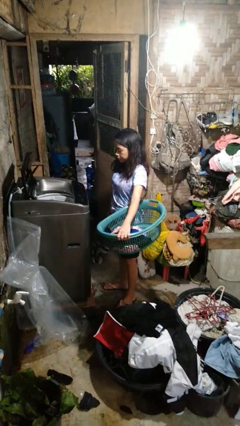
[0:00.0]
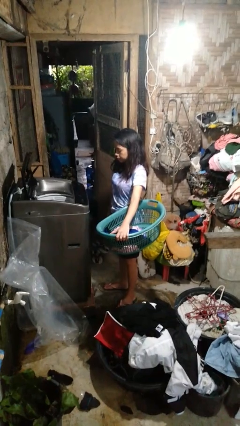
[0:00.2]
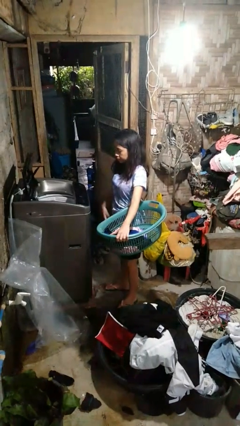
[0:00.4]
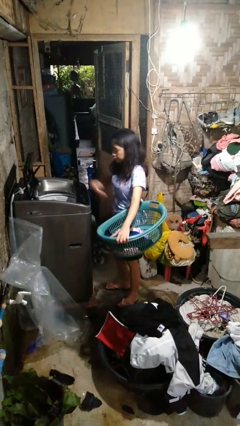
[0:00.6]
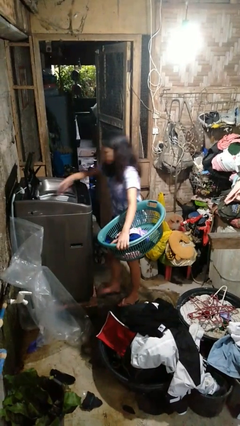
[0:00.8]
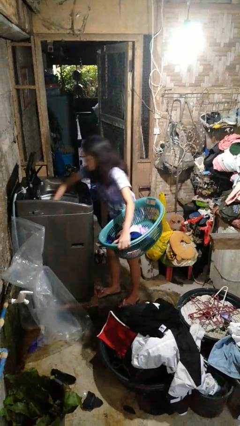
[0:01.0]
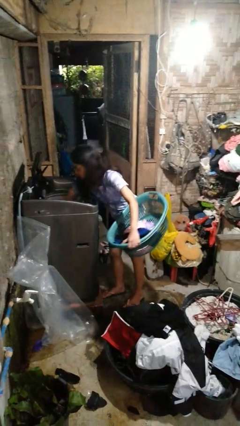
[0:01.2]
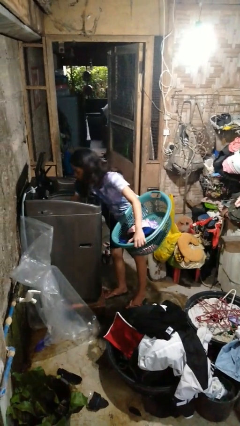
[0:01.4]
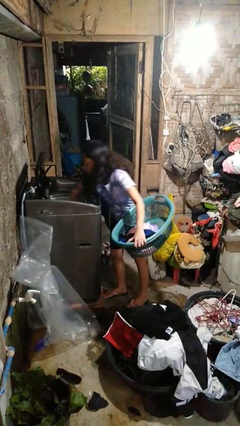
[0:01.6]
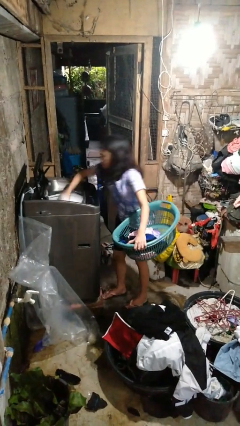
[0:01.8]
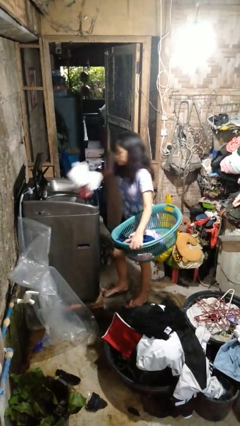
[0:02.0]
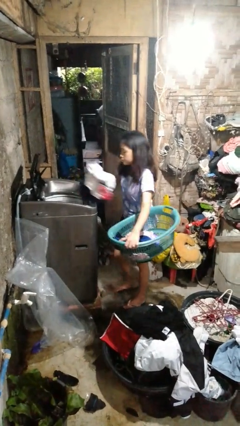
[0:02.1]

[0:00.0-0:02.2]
person unloads dryer

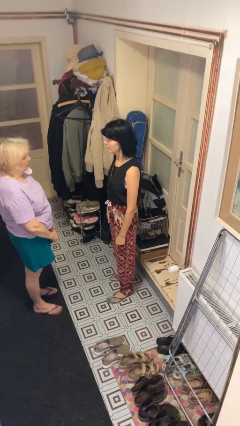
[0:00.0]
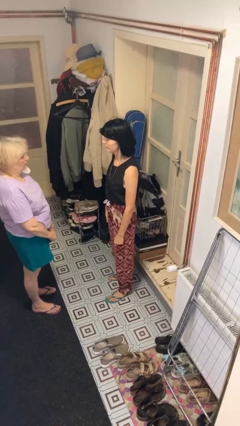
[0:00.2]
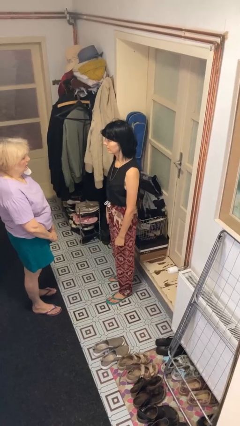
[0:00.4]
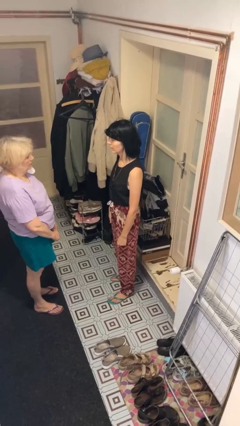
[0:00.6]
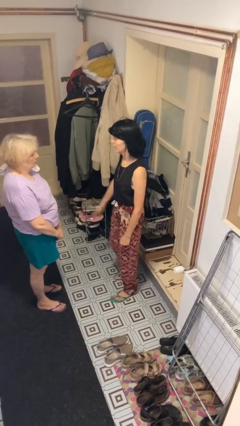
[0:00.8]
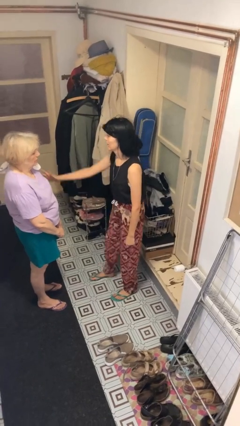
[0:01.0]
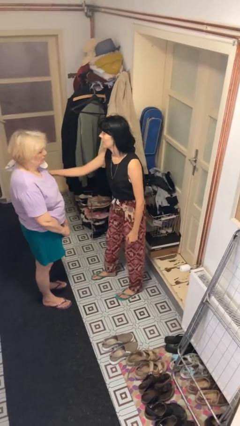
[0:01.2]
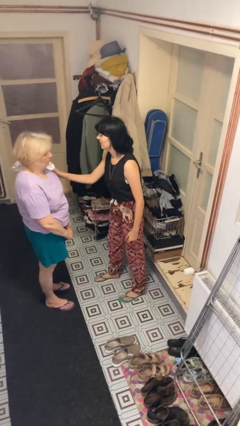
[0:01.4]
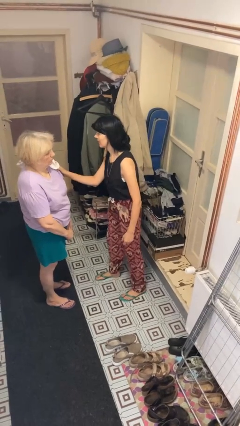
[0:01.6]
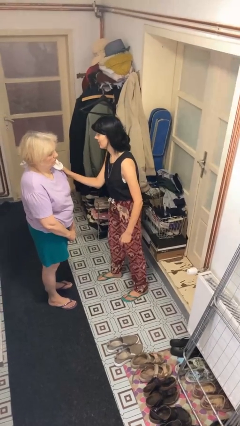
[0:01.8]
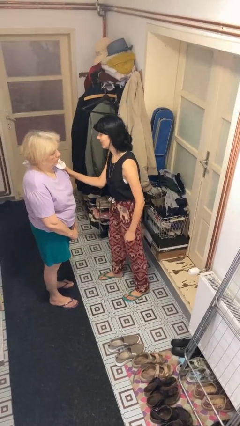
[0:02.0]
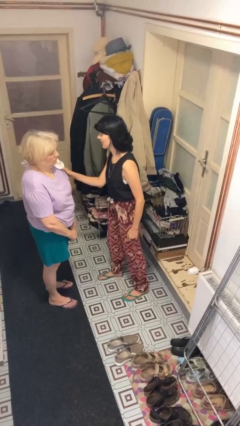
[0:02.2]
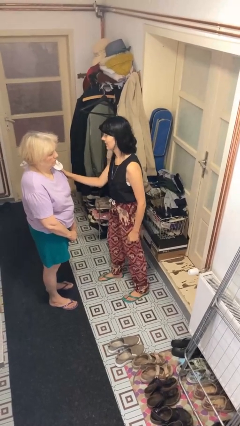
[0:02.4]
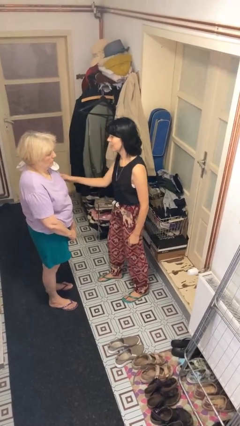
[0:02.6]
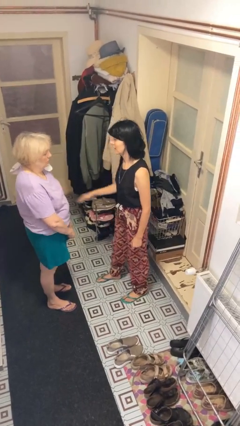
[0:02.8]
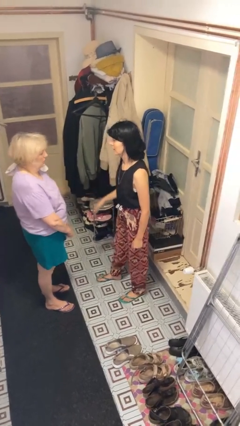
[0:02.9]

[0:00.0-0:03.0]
person grabs person by bicep

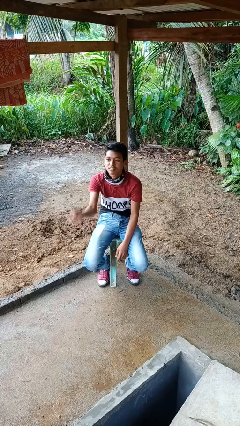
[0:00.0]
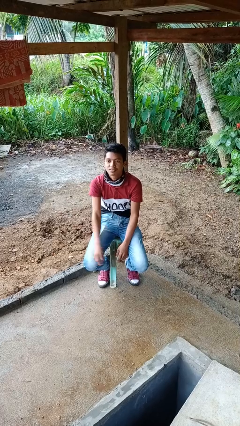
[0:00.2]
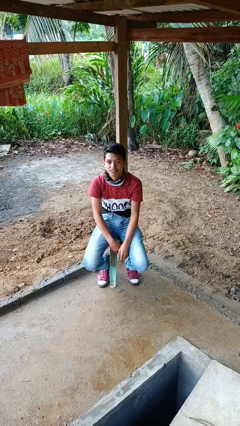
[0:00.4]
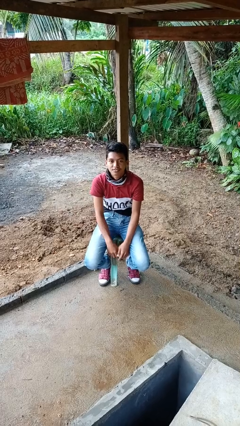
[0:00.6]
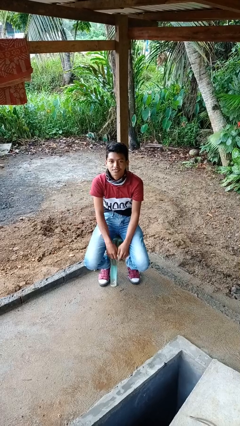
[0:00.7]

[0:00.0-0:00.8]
person gestures blow kiss

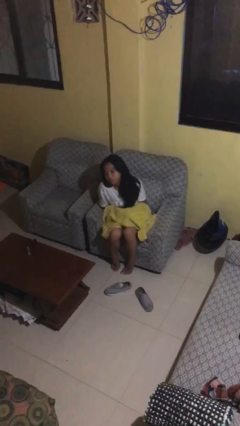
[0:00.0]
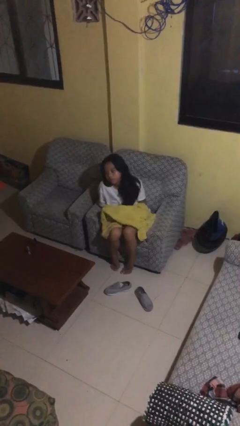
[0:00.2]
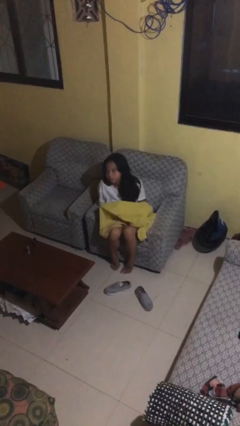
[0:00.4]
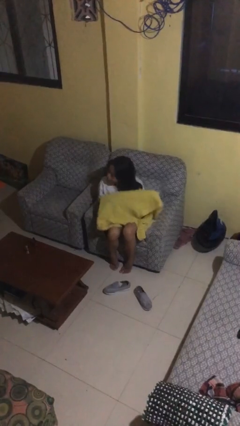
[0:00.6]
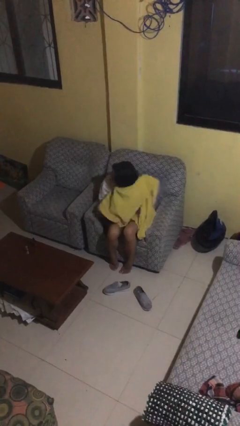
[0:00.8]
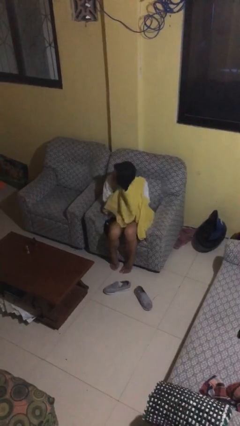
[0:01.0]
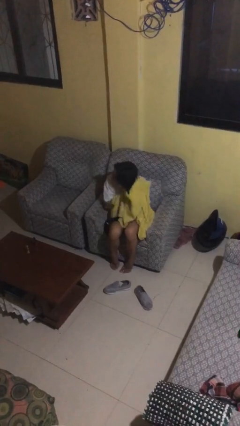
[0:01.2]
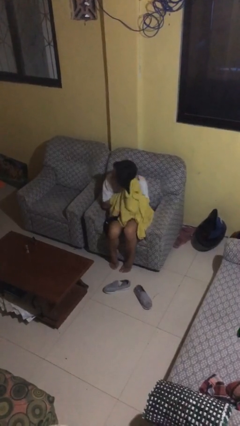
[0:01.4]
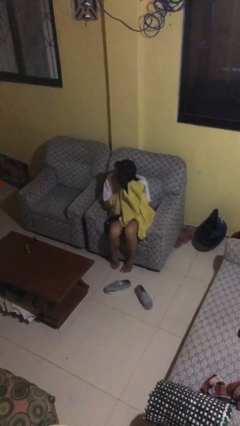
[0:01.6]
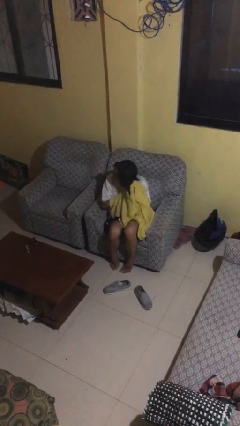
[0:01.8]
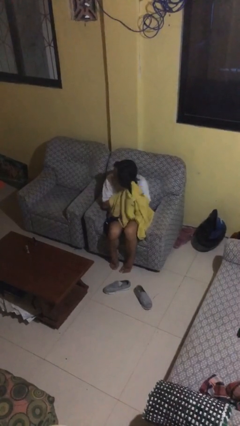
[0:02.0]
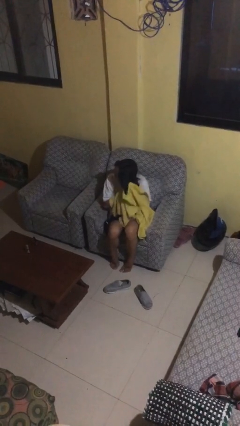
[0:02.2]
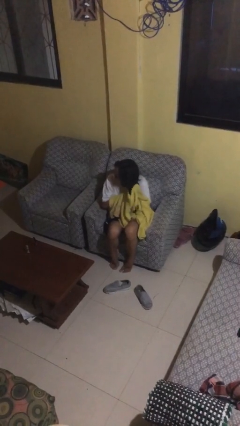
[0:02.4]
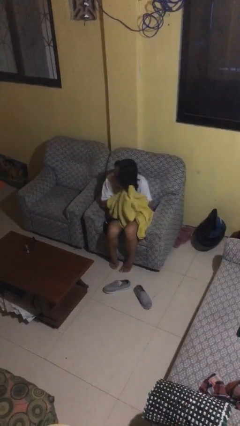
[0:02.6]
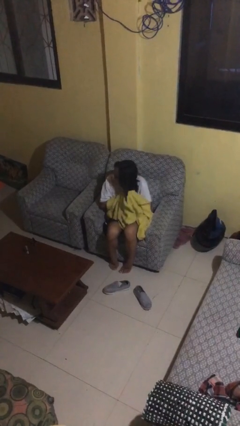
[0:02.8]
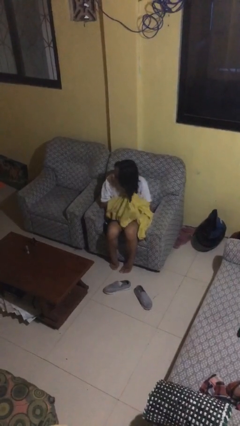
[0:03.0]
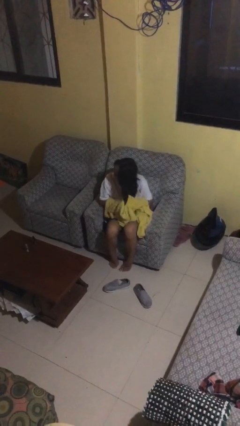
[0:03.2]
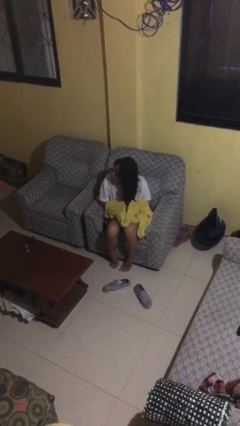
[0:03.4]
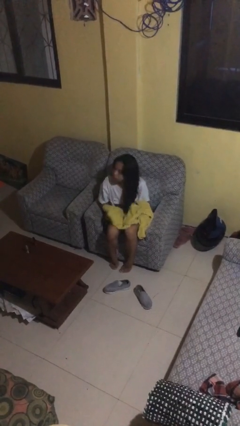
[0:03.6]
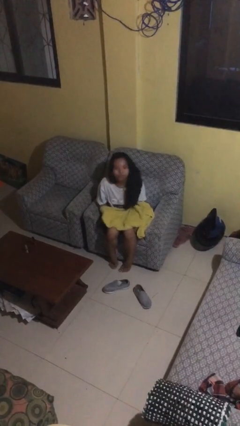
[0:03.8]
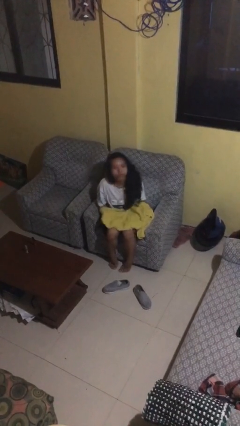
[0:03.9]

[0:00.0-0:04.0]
person dries hair with towel

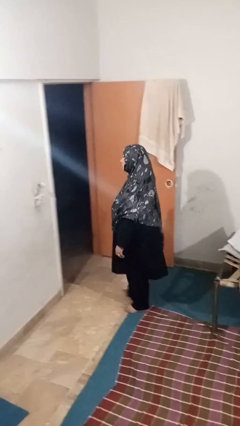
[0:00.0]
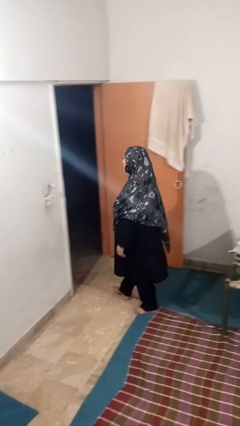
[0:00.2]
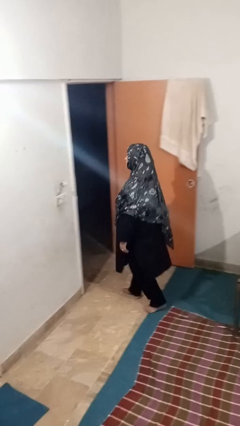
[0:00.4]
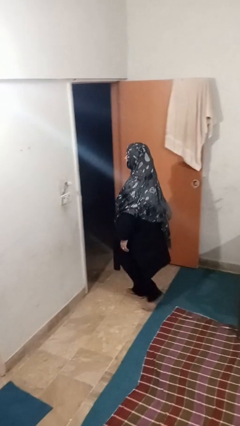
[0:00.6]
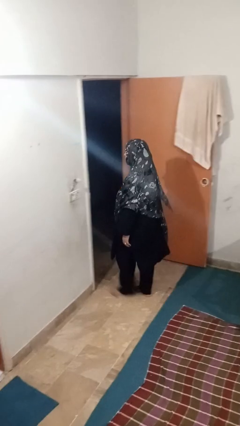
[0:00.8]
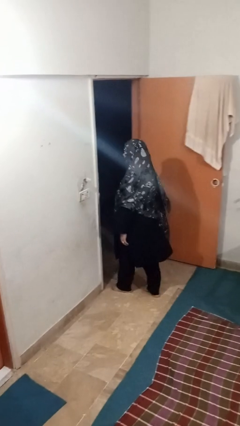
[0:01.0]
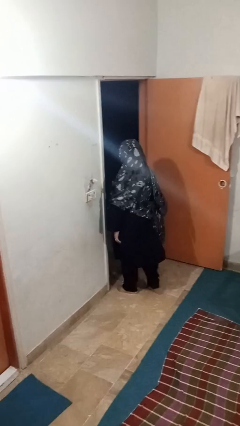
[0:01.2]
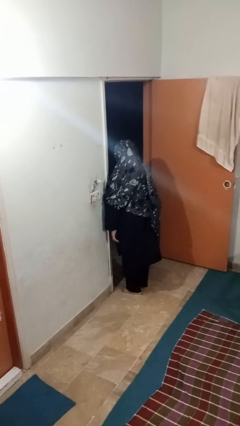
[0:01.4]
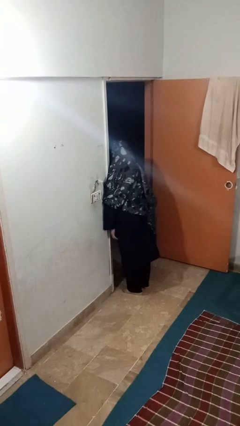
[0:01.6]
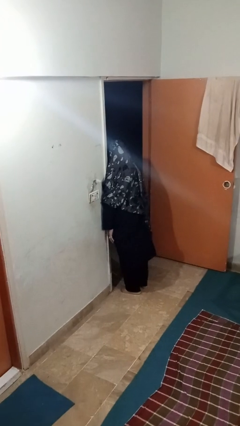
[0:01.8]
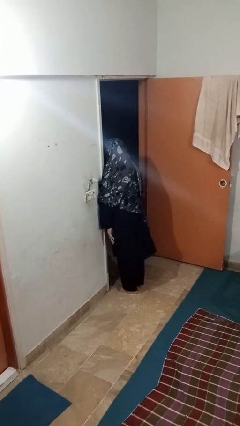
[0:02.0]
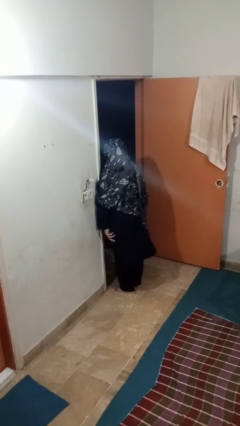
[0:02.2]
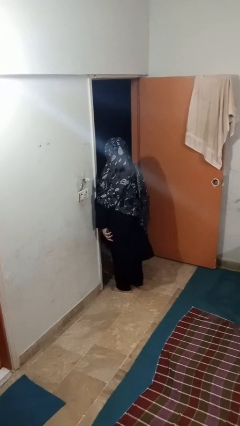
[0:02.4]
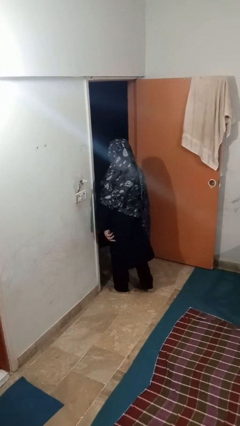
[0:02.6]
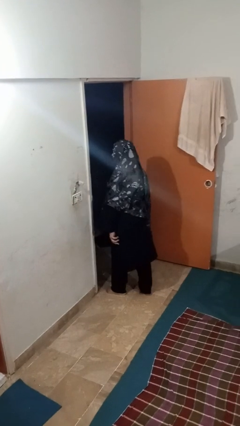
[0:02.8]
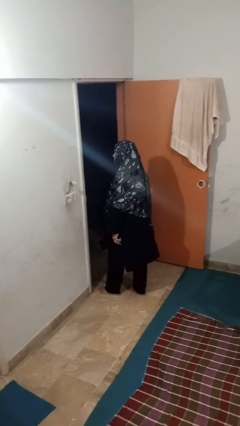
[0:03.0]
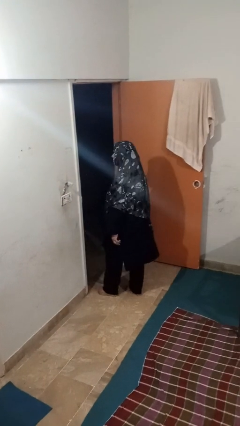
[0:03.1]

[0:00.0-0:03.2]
person bumps into wall

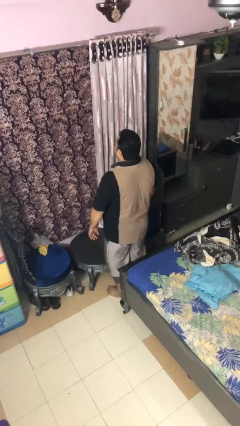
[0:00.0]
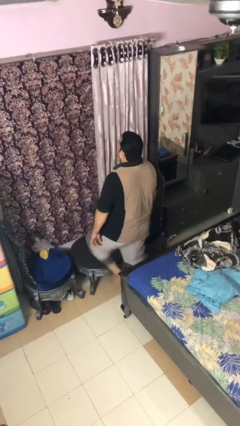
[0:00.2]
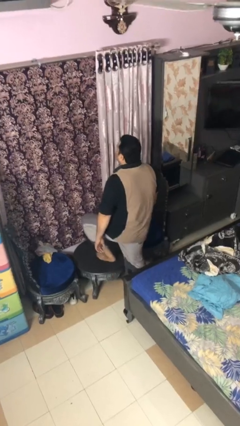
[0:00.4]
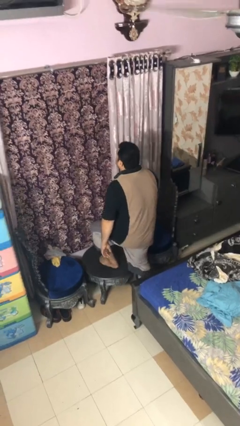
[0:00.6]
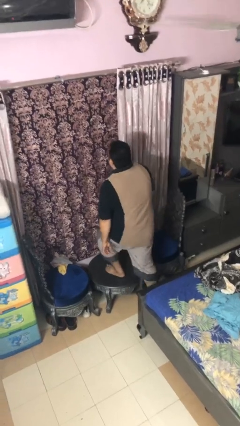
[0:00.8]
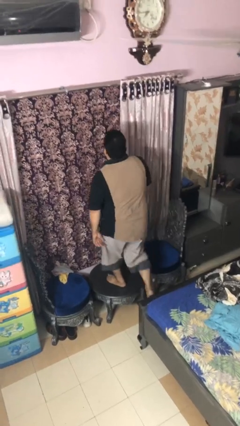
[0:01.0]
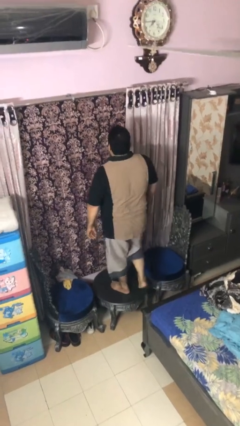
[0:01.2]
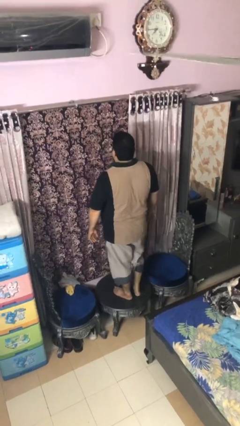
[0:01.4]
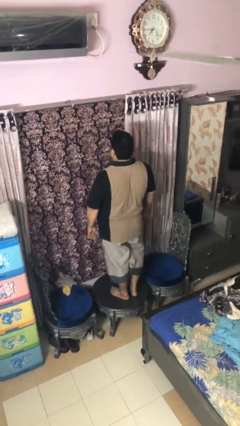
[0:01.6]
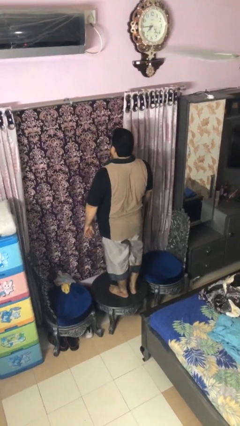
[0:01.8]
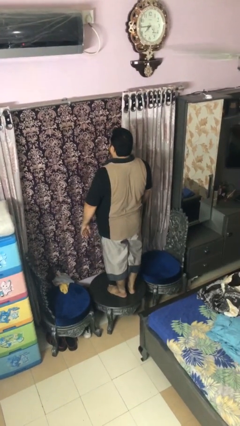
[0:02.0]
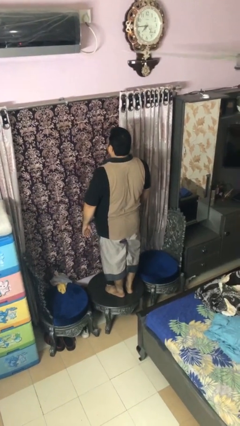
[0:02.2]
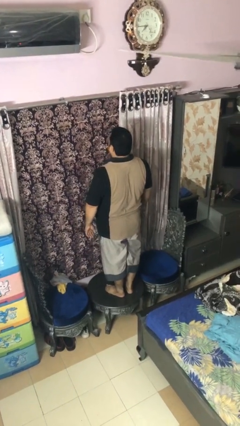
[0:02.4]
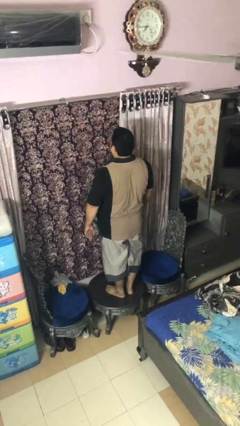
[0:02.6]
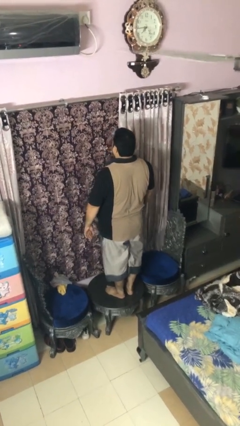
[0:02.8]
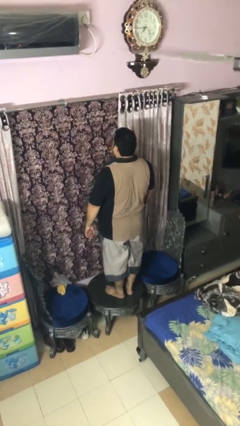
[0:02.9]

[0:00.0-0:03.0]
person climbs on table

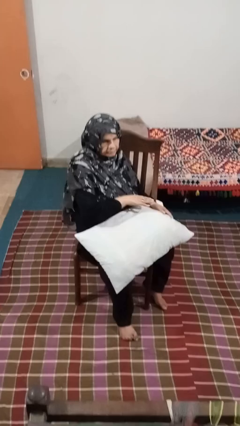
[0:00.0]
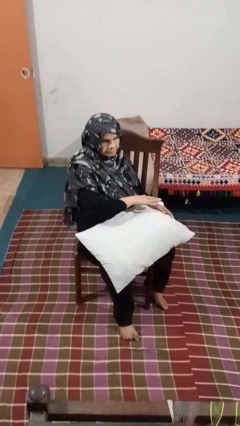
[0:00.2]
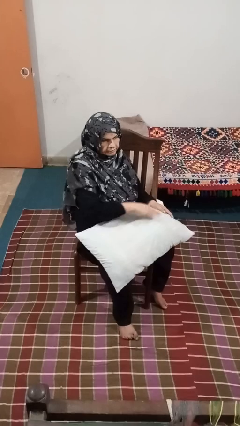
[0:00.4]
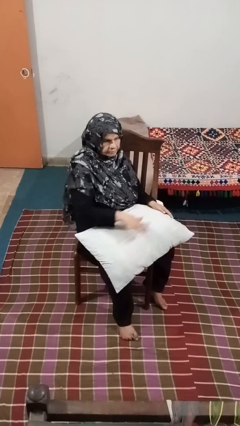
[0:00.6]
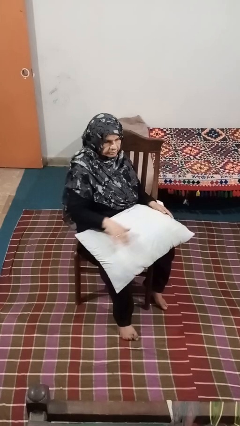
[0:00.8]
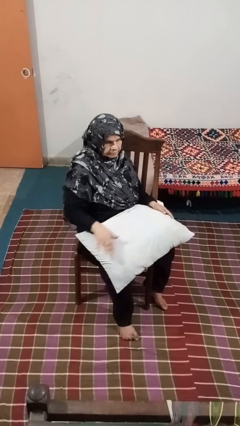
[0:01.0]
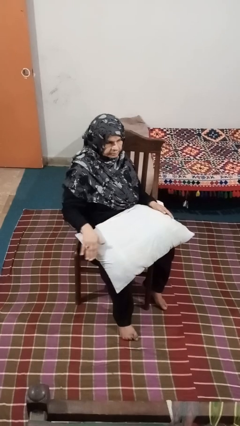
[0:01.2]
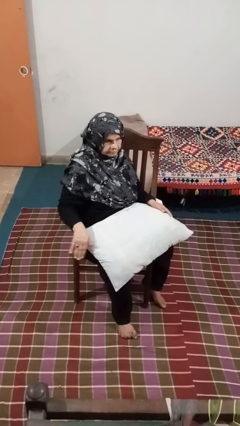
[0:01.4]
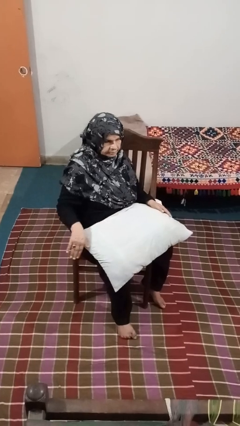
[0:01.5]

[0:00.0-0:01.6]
person waves hand over object
